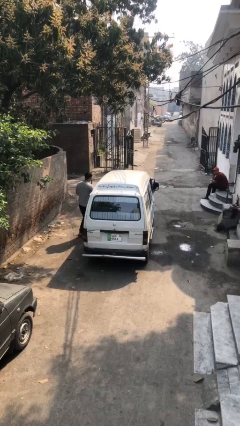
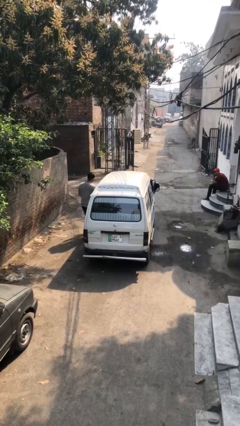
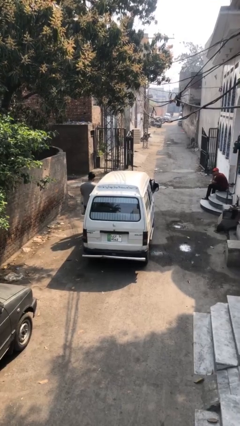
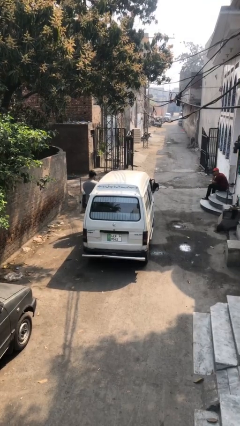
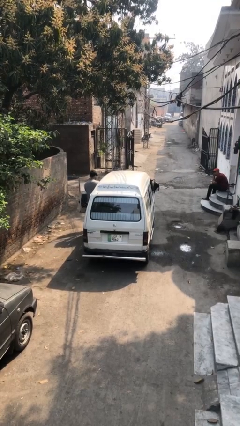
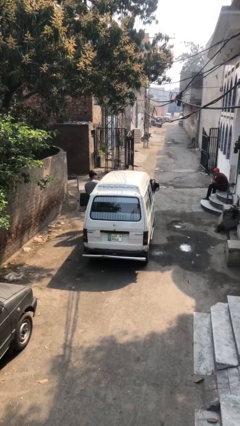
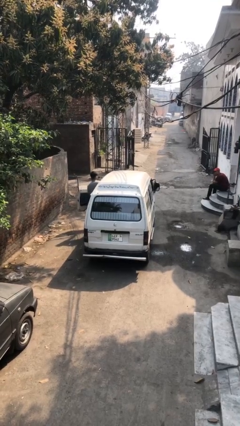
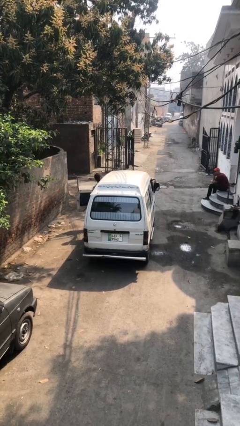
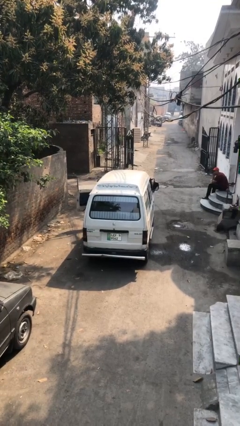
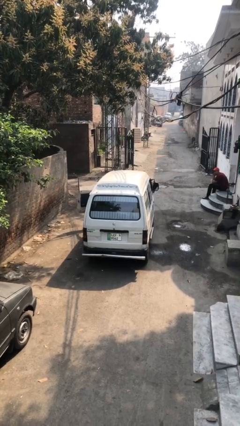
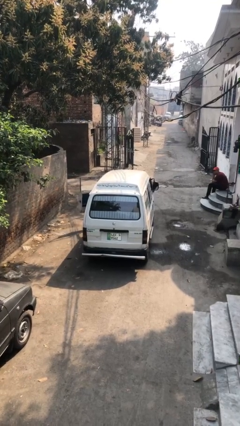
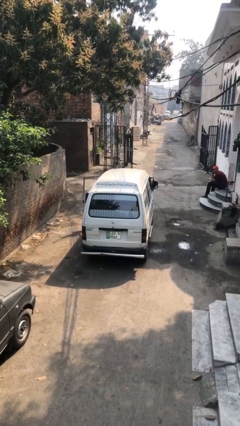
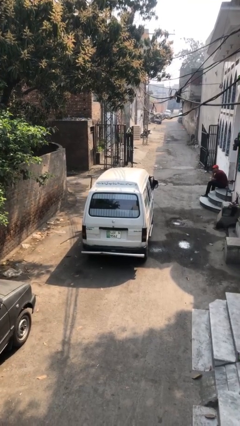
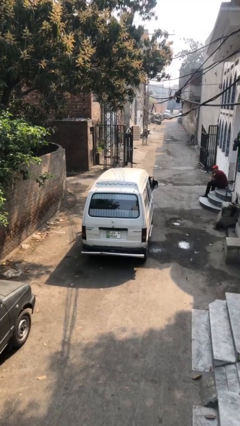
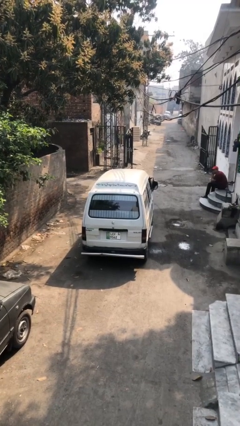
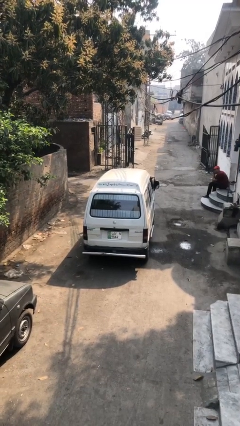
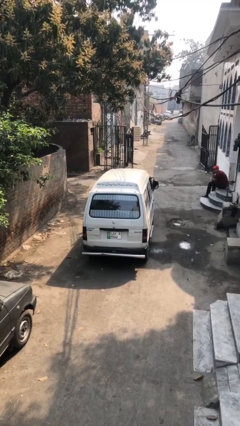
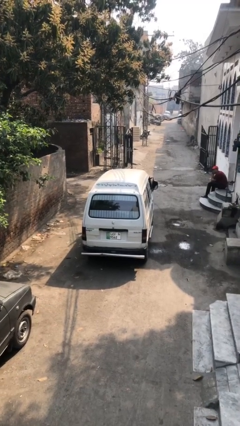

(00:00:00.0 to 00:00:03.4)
car picks up person

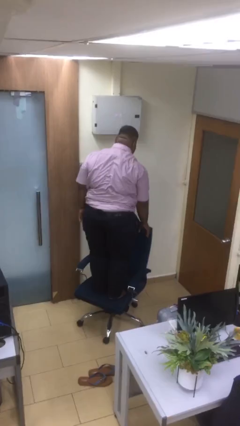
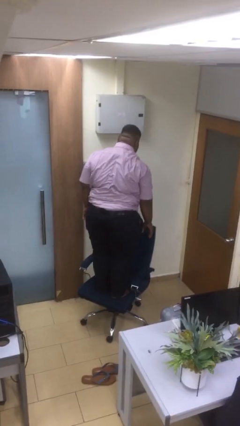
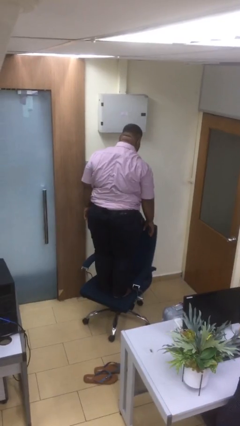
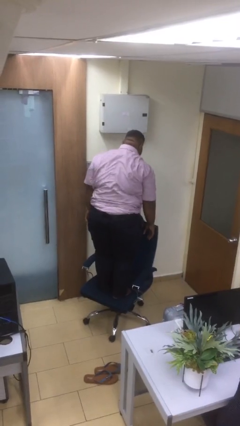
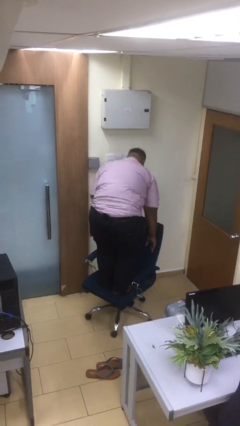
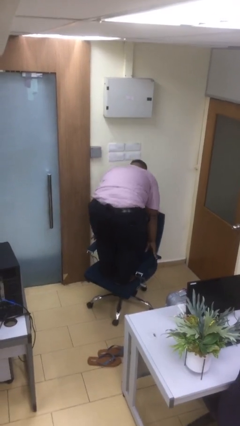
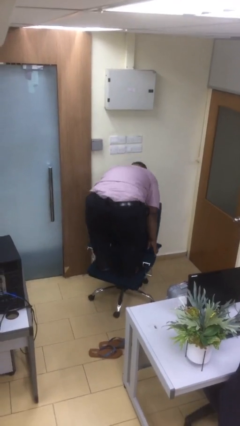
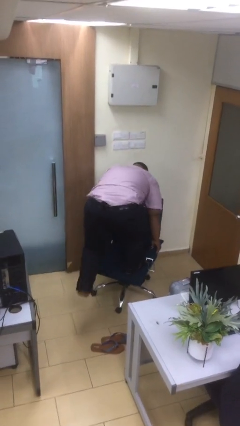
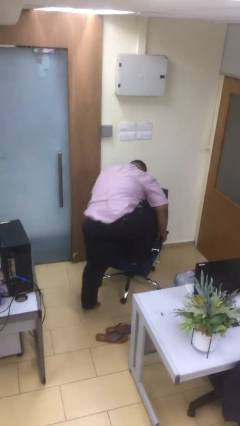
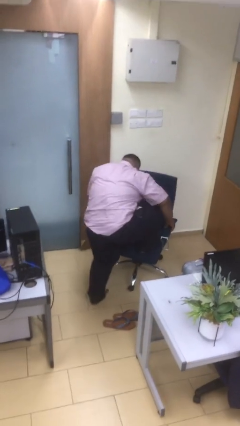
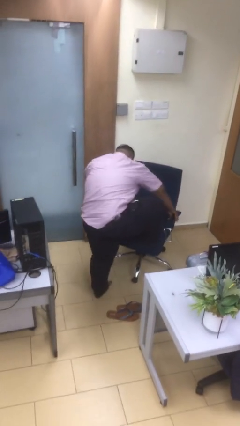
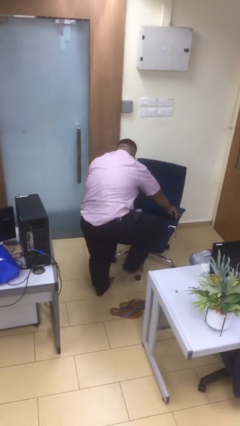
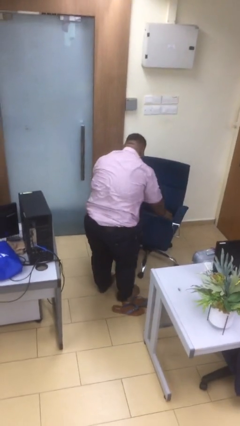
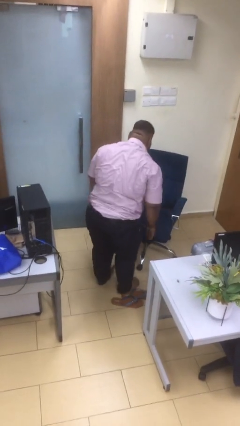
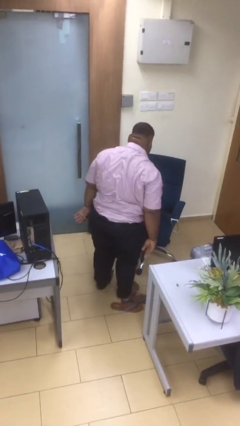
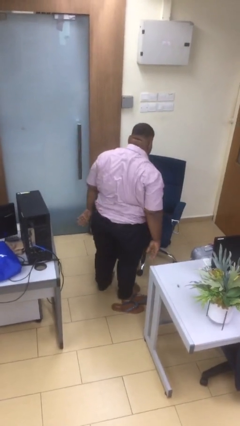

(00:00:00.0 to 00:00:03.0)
person climbs off chair

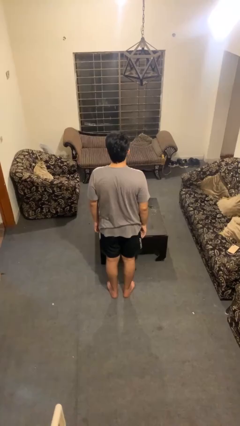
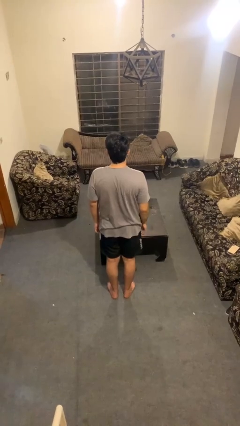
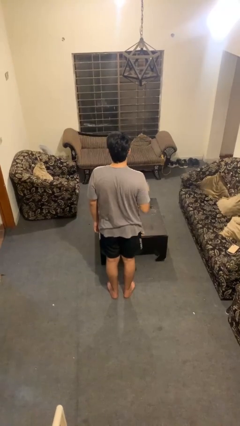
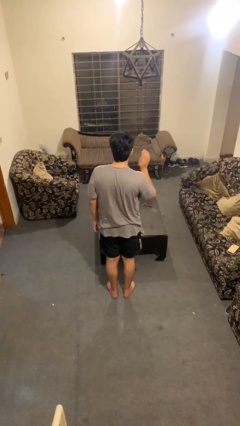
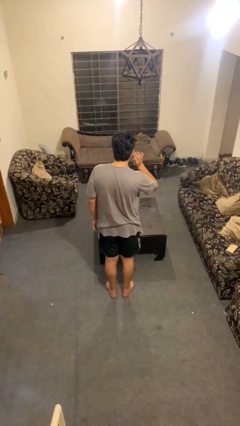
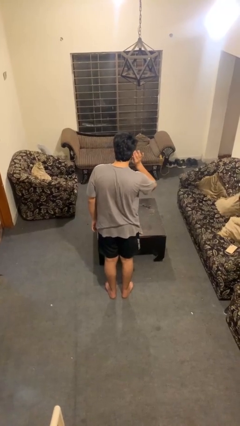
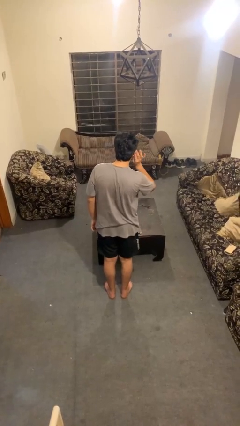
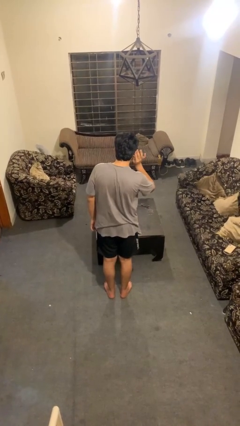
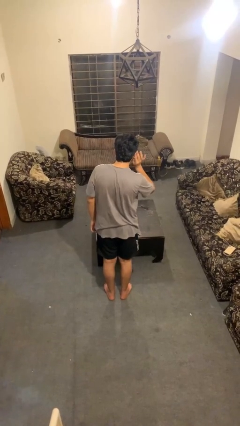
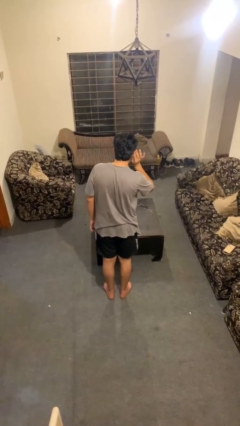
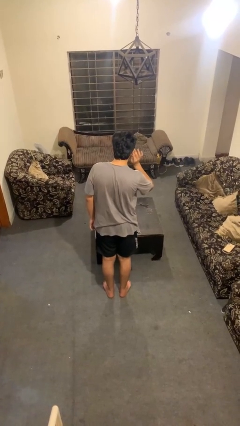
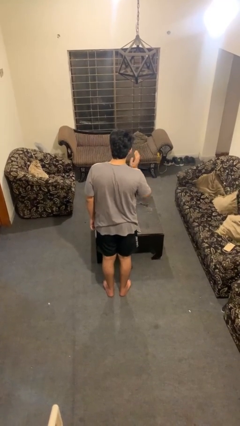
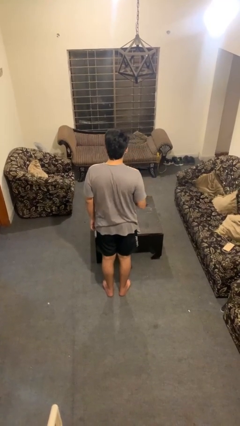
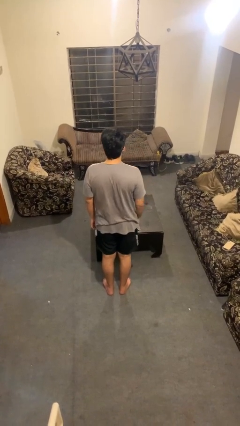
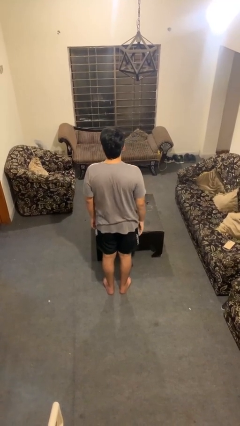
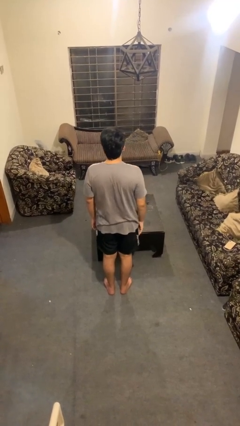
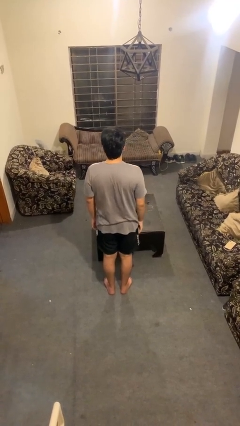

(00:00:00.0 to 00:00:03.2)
person gestures listen closely

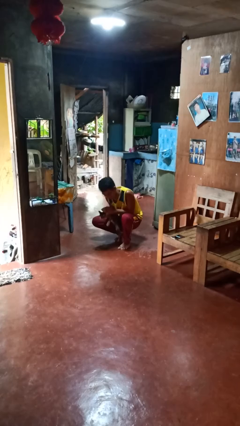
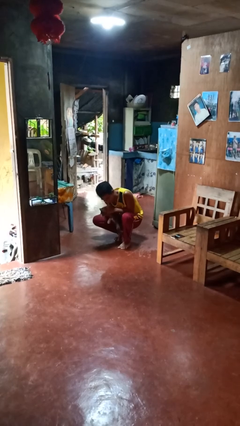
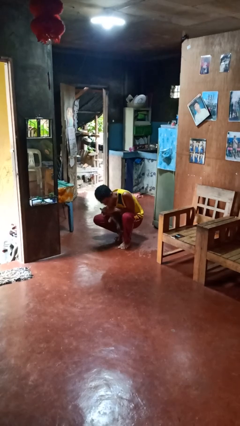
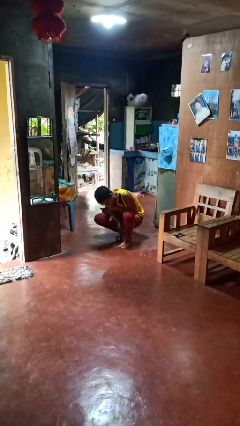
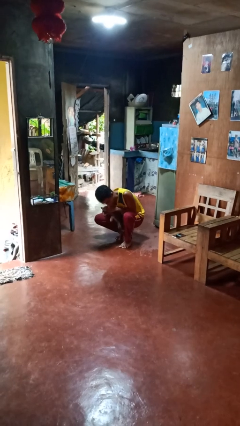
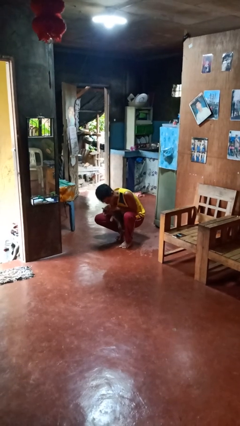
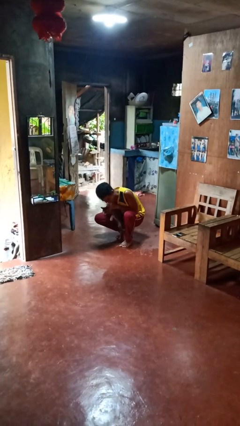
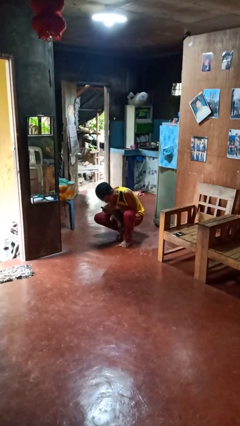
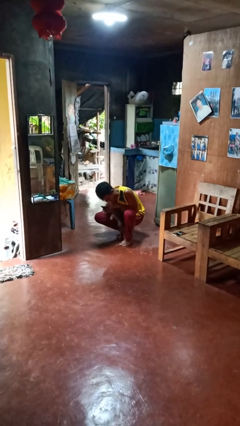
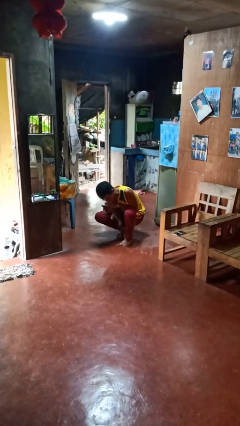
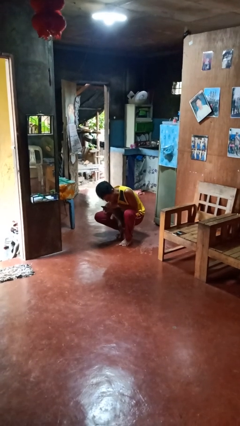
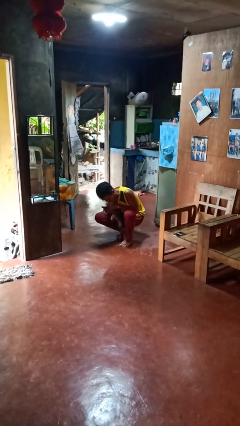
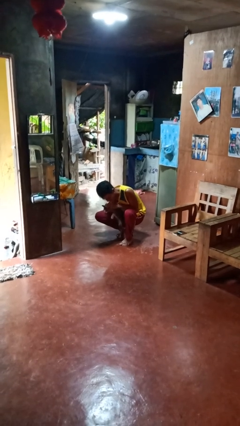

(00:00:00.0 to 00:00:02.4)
person hugs cat

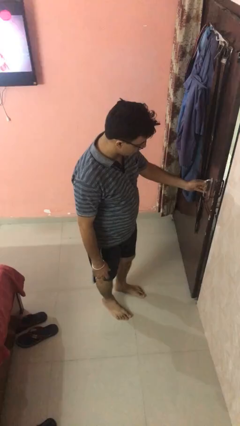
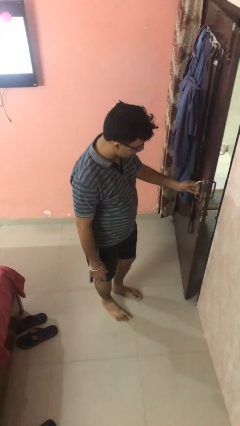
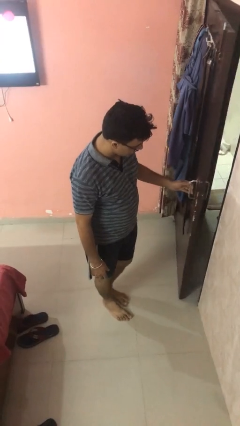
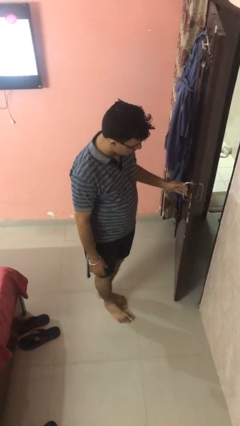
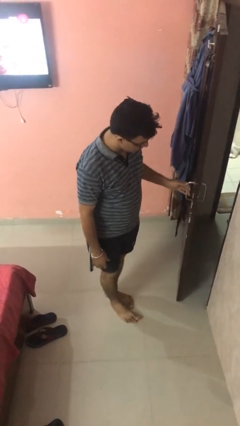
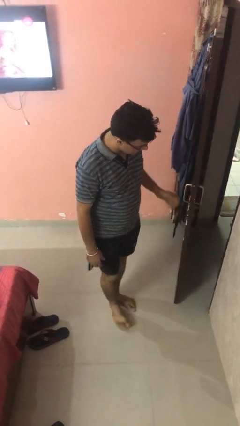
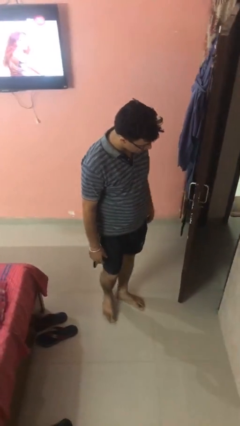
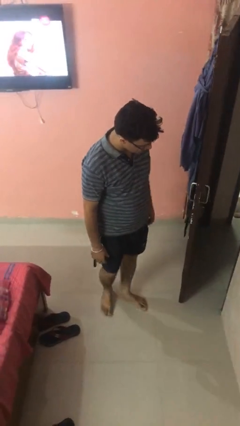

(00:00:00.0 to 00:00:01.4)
person opens facility door

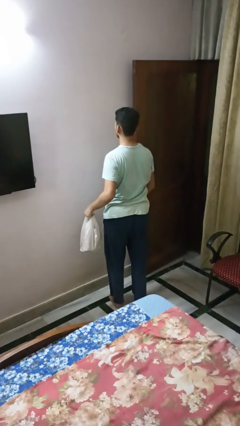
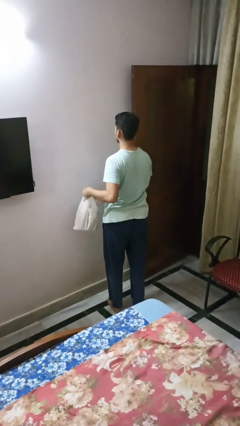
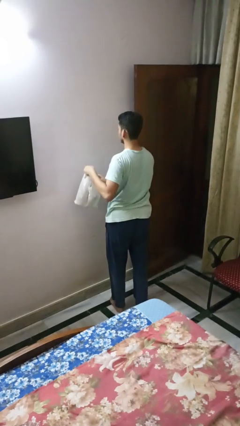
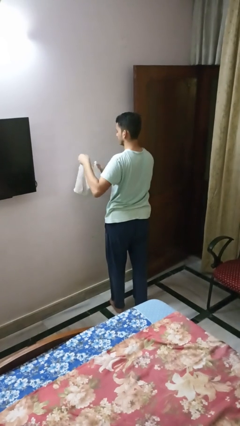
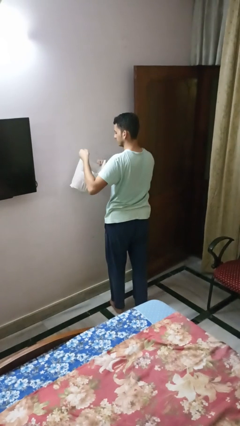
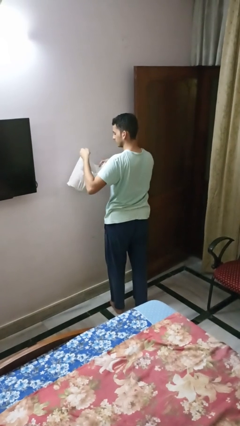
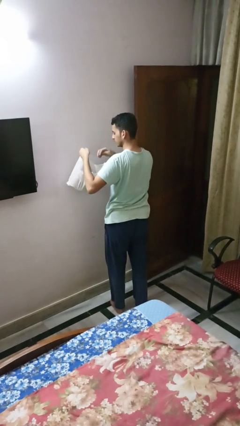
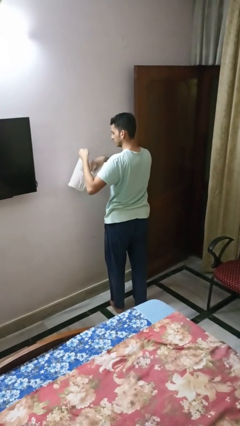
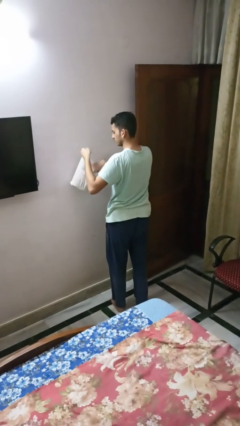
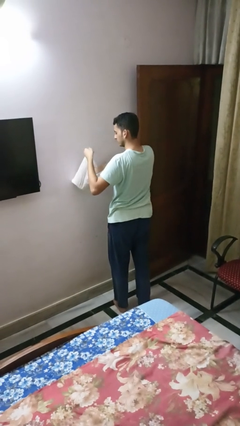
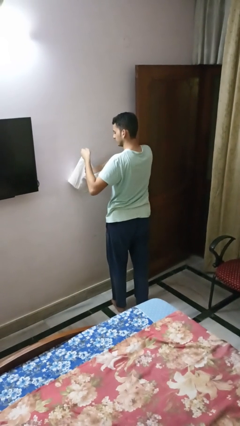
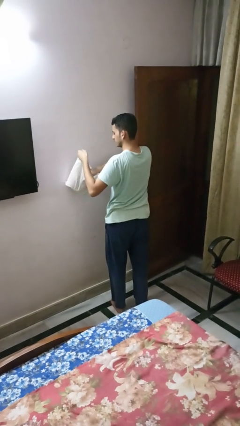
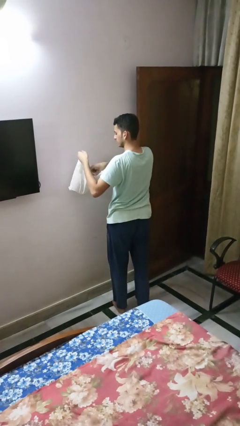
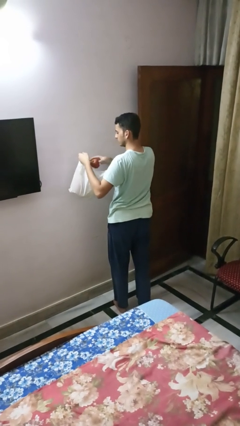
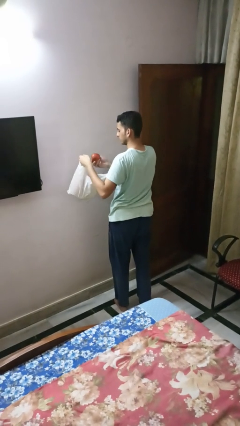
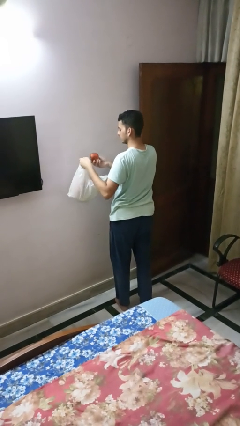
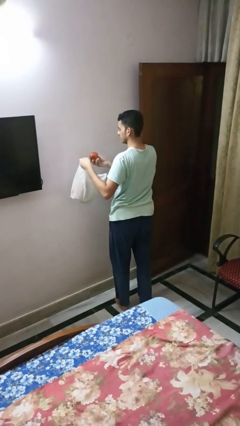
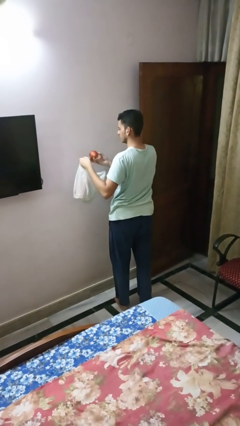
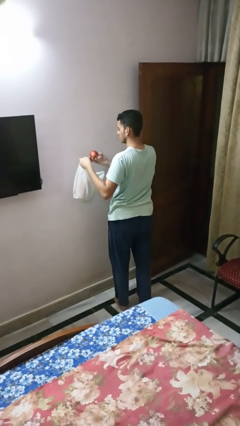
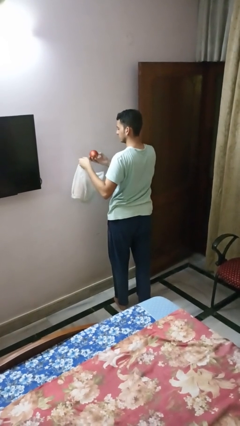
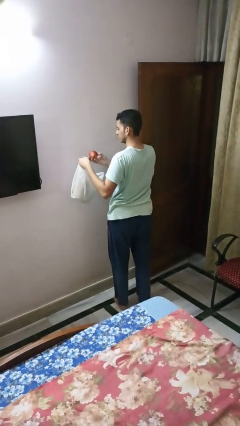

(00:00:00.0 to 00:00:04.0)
person takes object from bag
